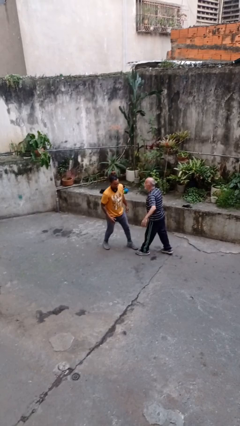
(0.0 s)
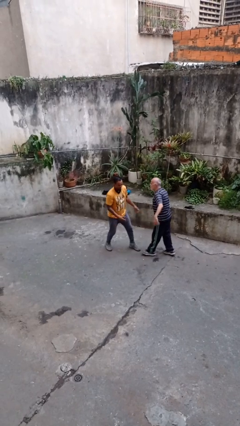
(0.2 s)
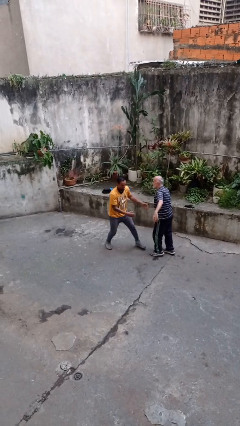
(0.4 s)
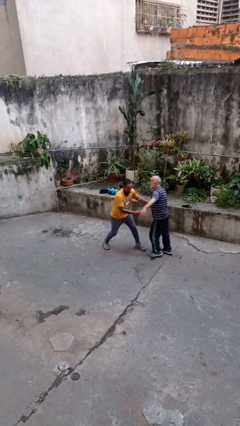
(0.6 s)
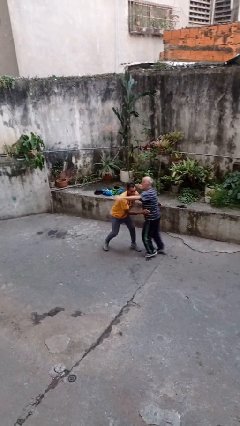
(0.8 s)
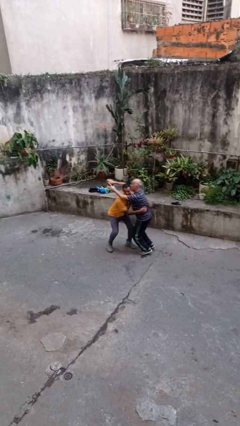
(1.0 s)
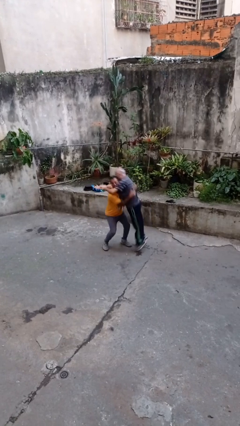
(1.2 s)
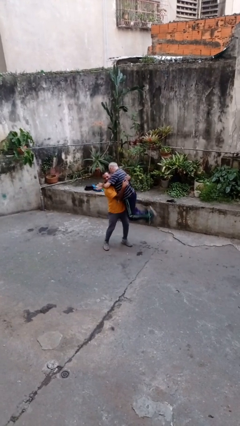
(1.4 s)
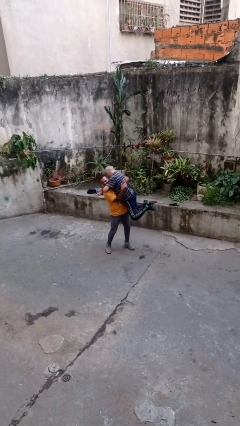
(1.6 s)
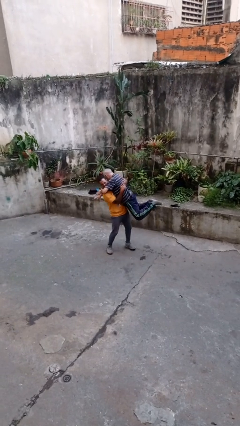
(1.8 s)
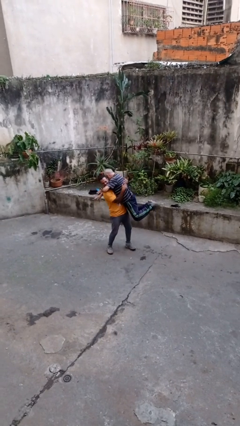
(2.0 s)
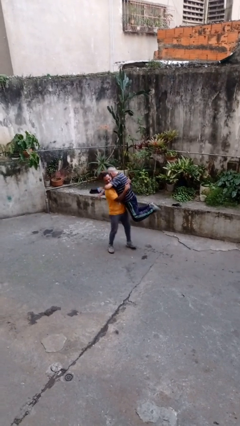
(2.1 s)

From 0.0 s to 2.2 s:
person picks up person

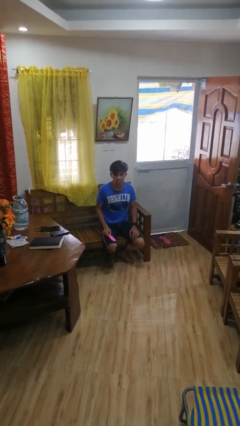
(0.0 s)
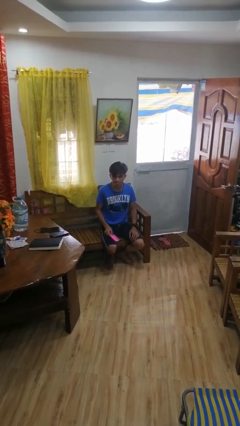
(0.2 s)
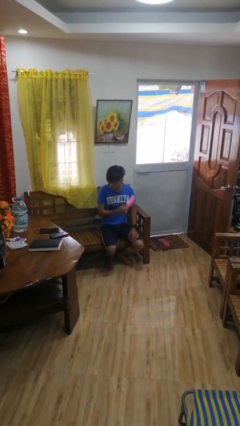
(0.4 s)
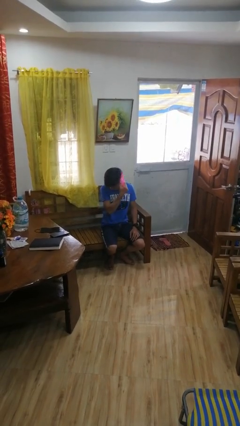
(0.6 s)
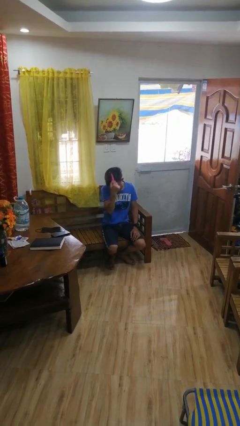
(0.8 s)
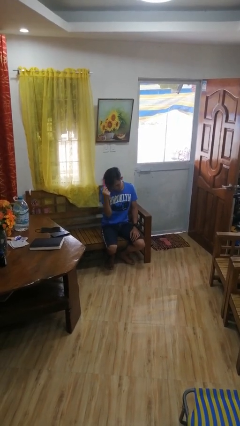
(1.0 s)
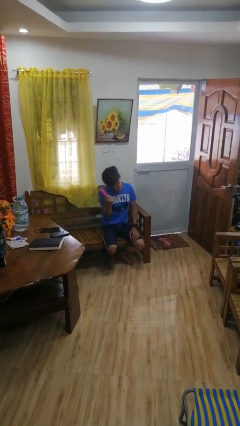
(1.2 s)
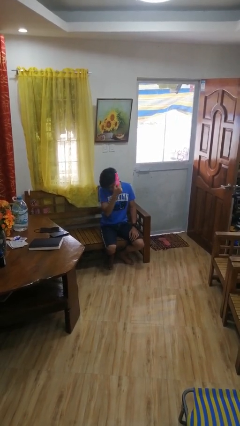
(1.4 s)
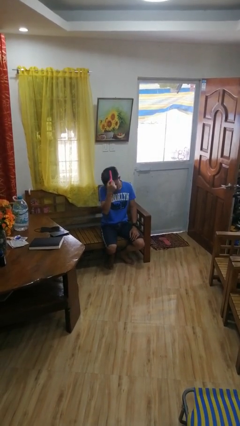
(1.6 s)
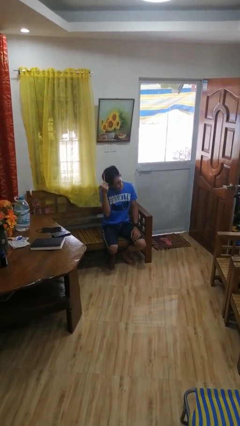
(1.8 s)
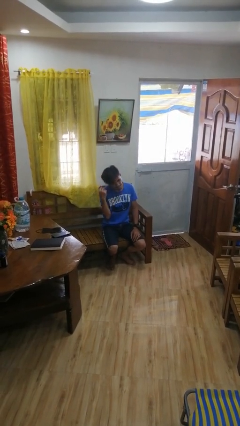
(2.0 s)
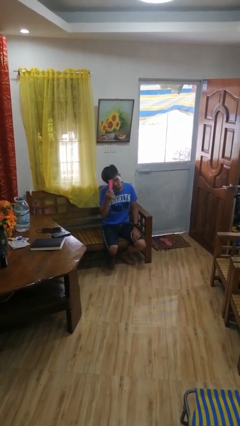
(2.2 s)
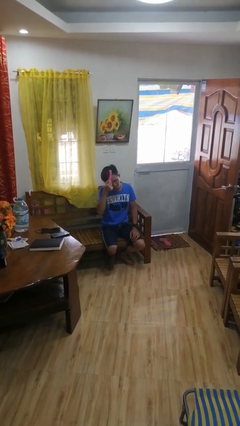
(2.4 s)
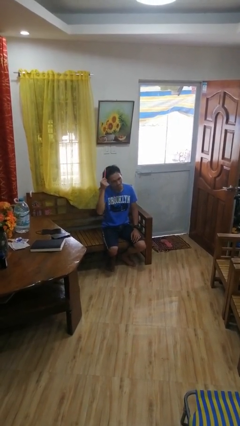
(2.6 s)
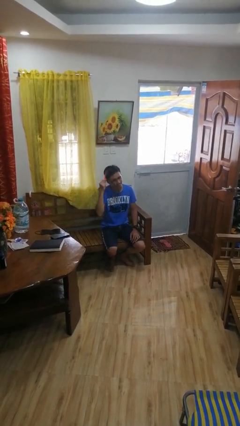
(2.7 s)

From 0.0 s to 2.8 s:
person brushes hair

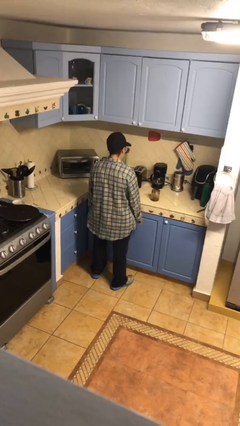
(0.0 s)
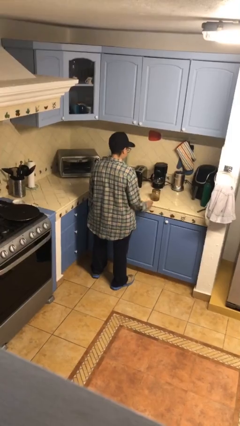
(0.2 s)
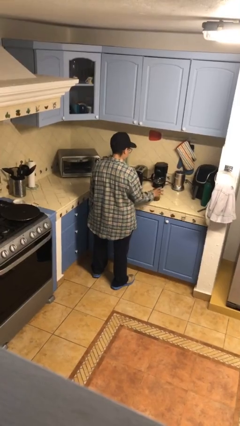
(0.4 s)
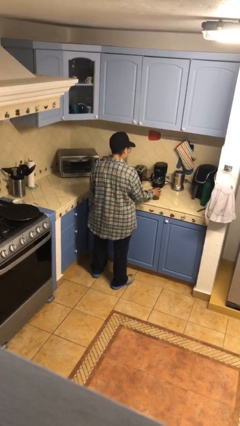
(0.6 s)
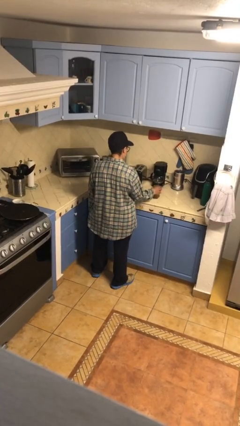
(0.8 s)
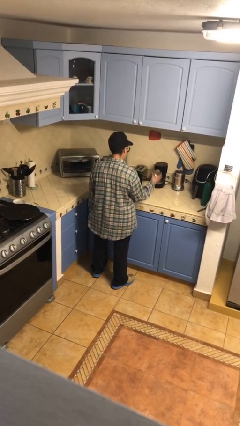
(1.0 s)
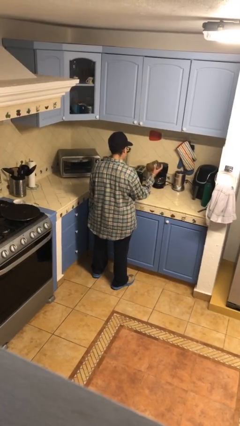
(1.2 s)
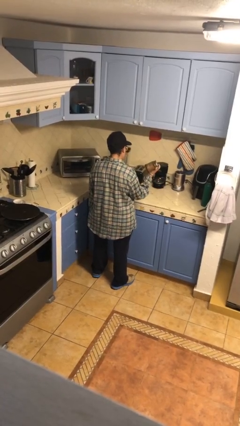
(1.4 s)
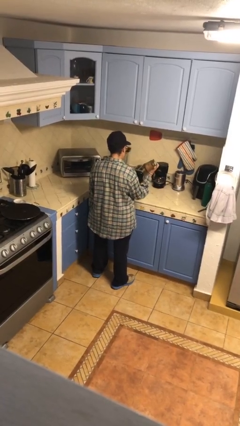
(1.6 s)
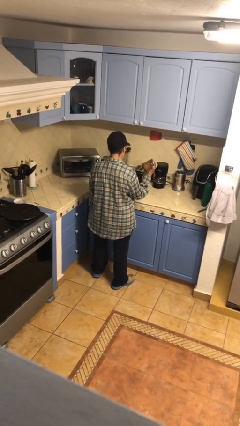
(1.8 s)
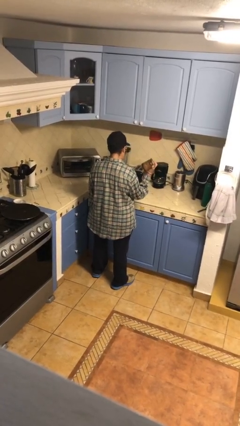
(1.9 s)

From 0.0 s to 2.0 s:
person picks up object from countertop

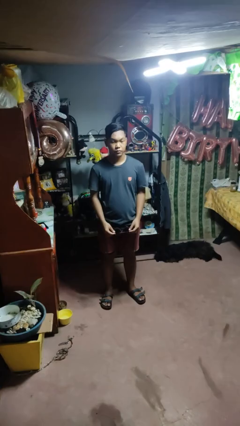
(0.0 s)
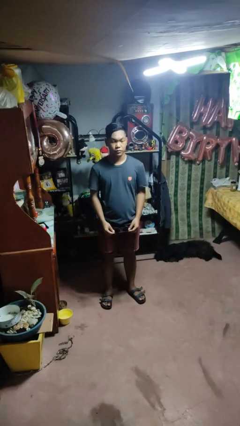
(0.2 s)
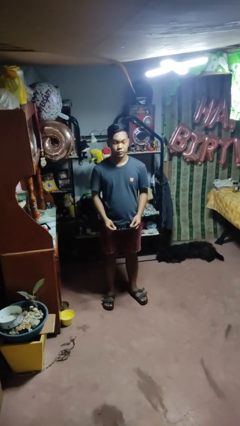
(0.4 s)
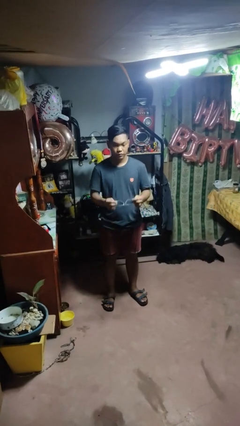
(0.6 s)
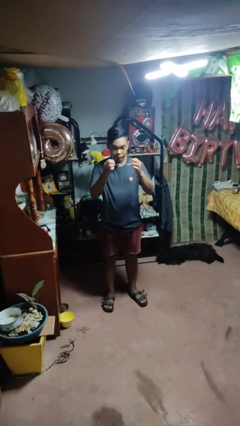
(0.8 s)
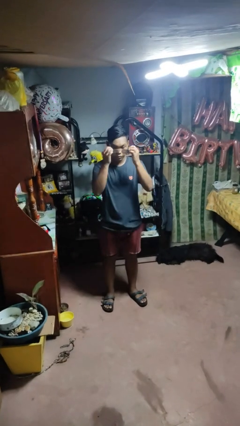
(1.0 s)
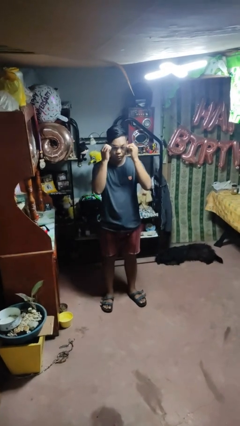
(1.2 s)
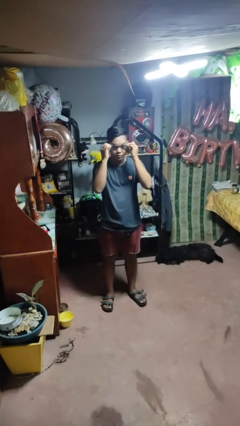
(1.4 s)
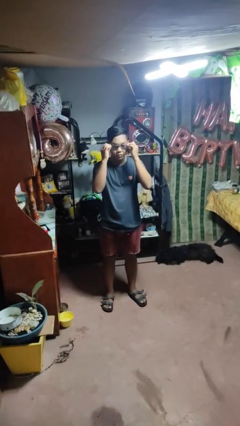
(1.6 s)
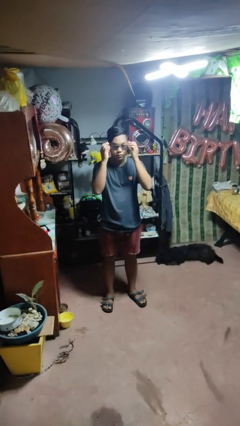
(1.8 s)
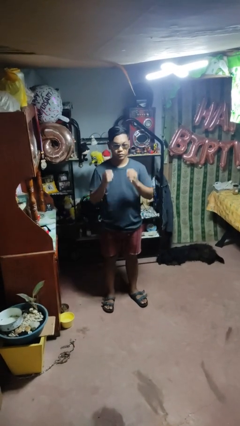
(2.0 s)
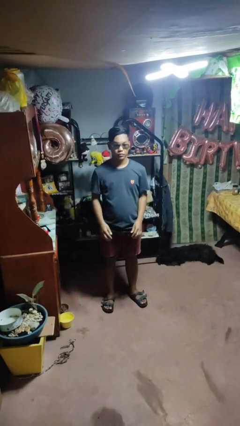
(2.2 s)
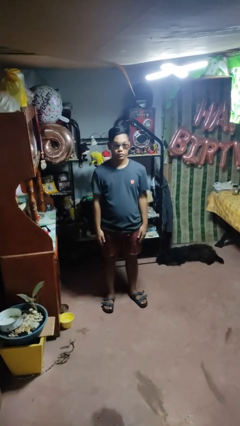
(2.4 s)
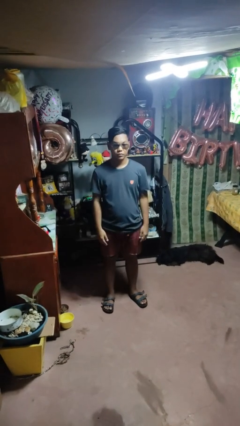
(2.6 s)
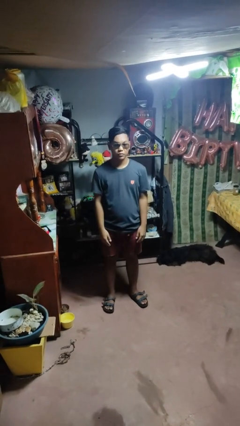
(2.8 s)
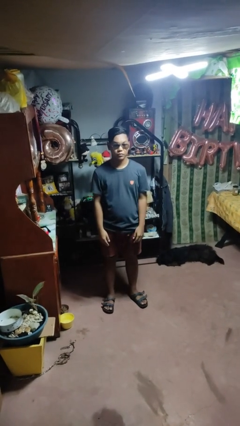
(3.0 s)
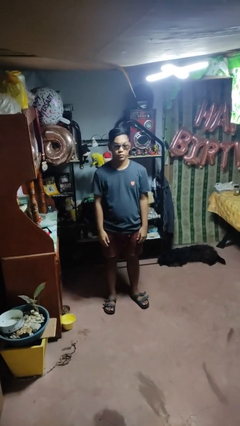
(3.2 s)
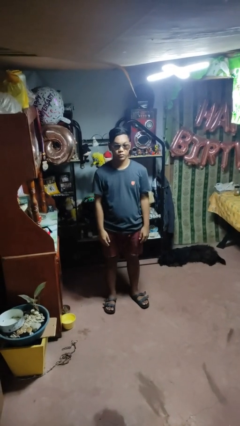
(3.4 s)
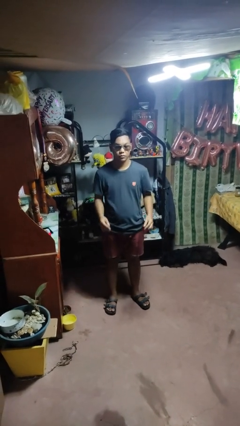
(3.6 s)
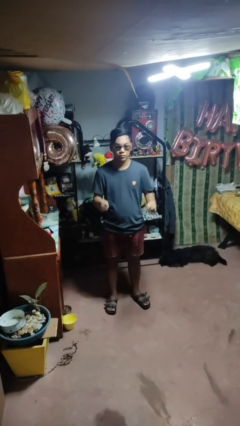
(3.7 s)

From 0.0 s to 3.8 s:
person puts on sunglasses

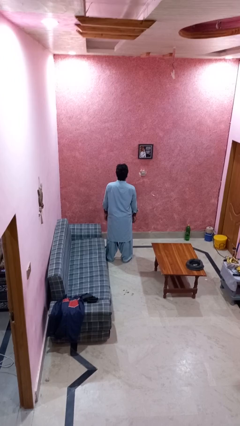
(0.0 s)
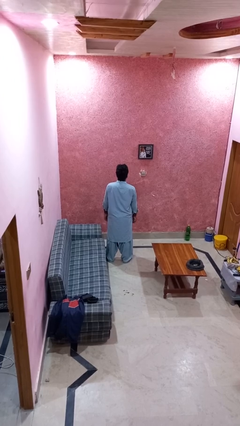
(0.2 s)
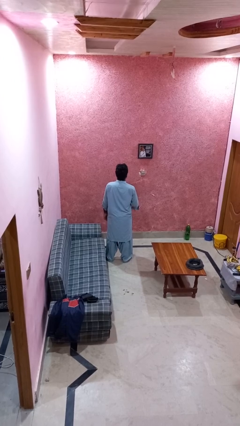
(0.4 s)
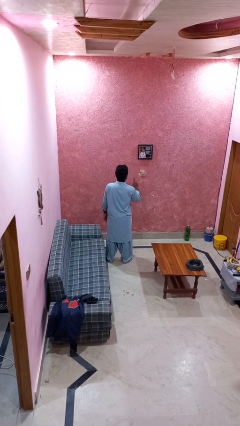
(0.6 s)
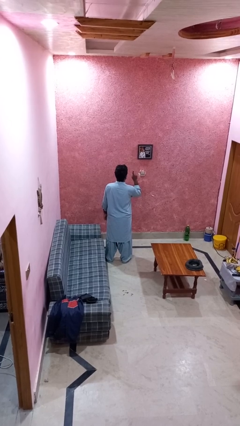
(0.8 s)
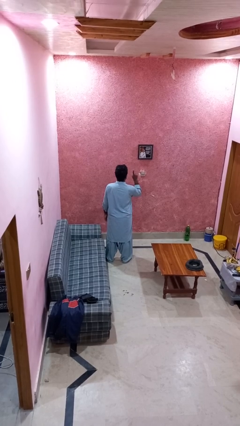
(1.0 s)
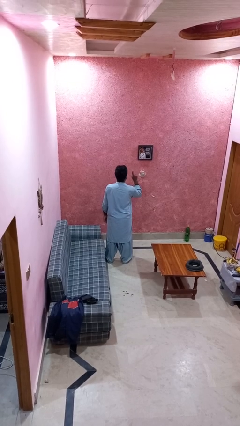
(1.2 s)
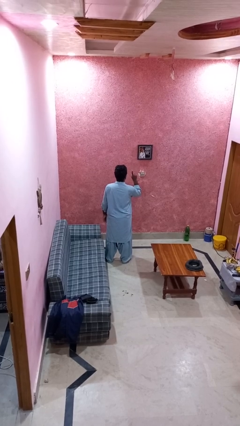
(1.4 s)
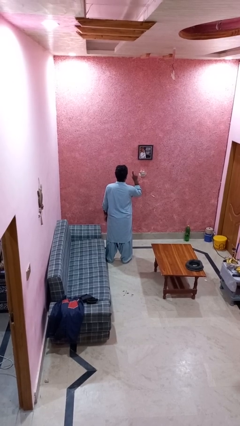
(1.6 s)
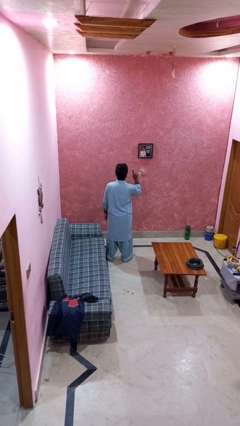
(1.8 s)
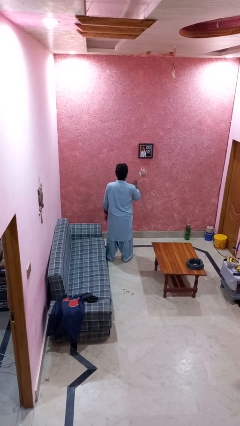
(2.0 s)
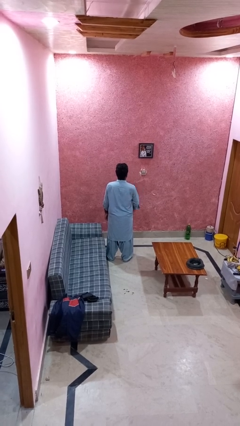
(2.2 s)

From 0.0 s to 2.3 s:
person gestures number one

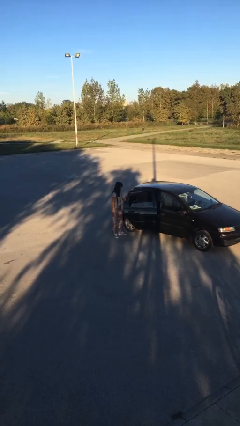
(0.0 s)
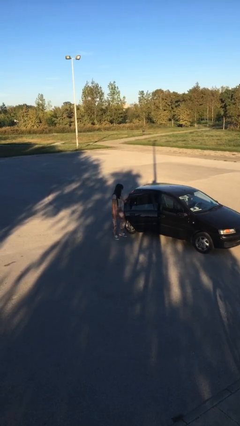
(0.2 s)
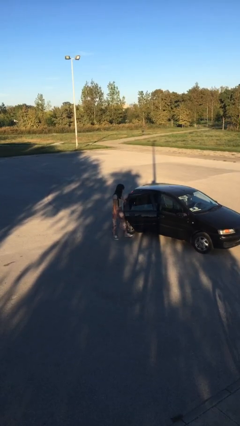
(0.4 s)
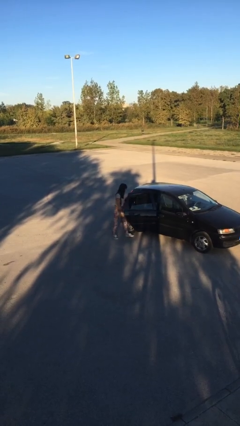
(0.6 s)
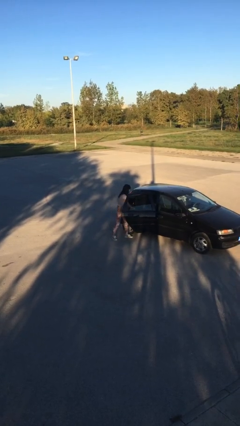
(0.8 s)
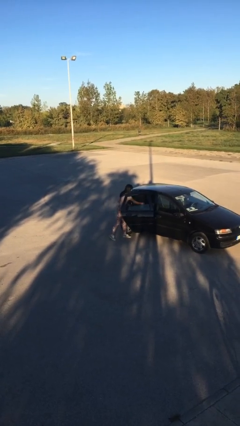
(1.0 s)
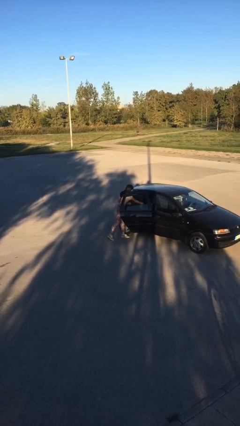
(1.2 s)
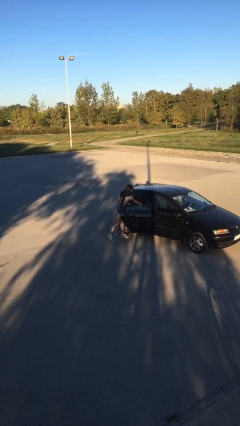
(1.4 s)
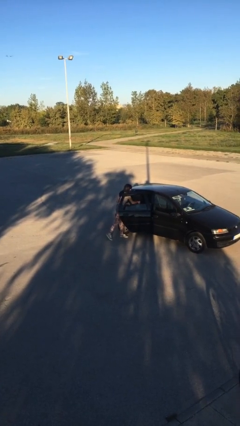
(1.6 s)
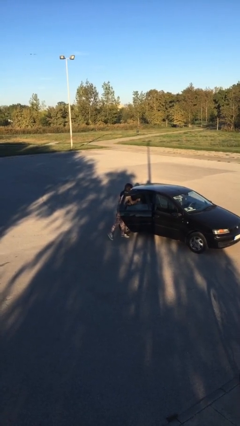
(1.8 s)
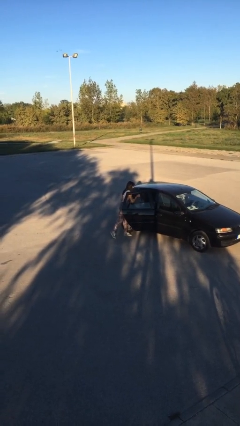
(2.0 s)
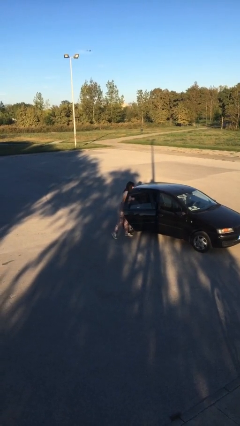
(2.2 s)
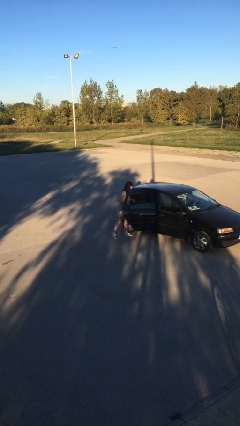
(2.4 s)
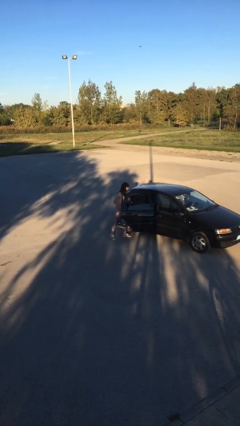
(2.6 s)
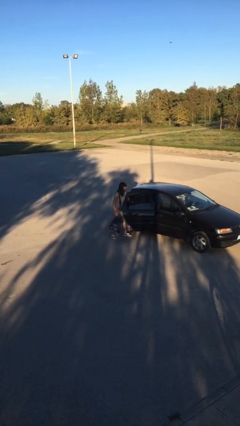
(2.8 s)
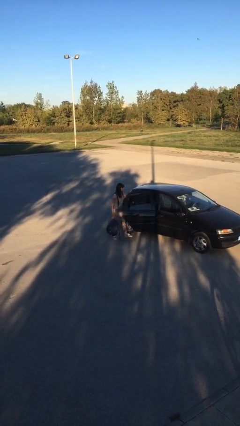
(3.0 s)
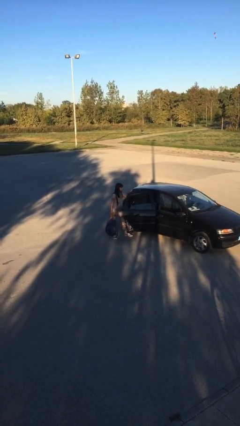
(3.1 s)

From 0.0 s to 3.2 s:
person unloads car

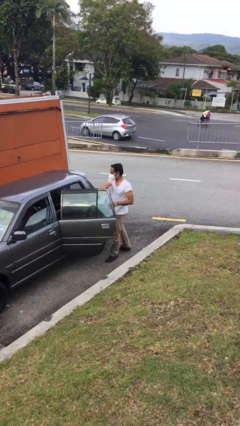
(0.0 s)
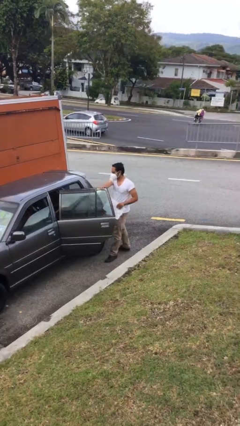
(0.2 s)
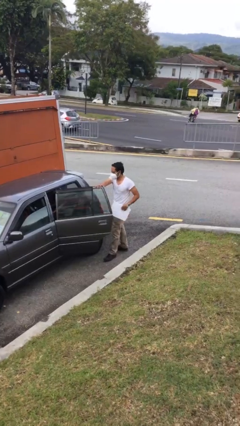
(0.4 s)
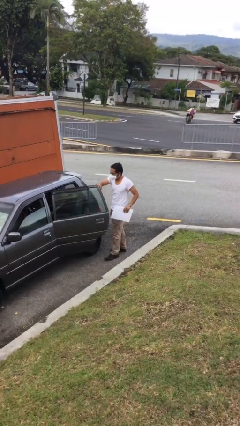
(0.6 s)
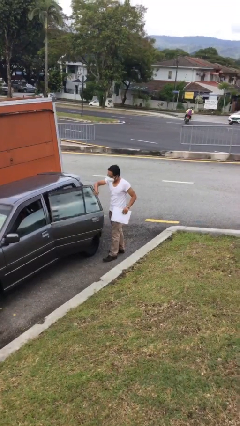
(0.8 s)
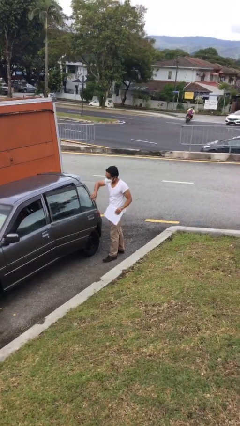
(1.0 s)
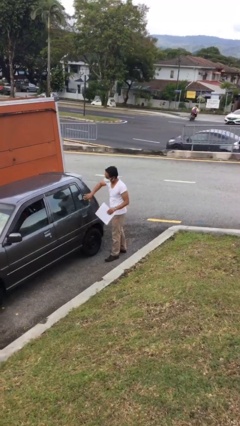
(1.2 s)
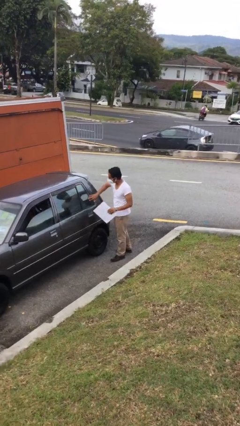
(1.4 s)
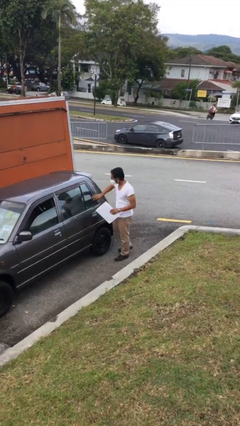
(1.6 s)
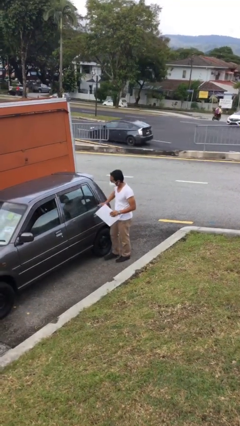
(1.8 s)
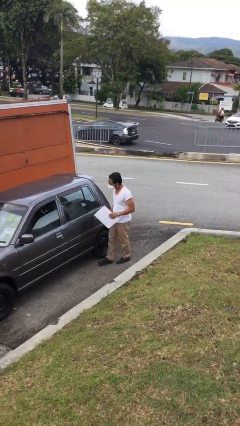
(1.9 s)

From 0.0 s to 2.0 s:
person closes car door
